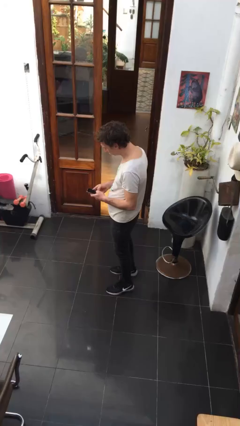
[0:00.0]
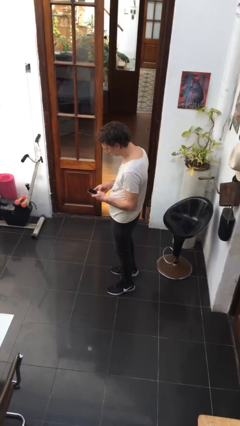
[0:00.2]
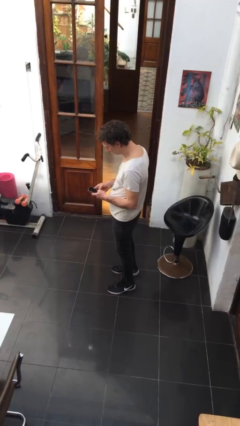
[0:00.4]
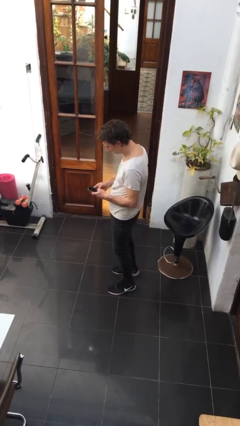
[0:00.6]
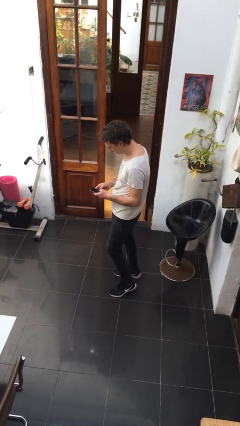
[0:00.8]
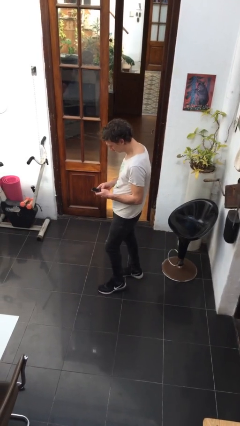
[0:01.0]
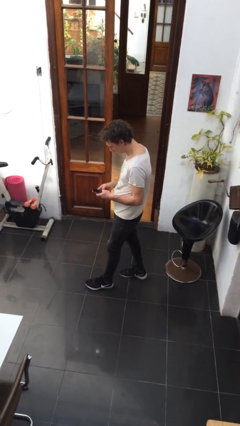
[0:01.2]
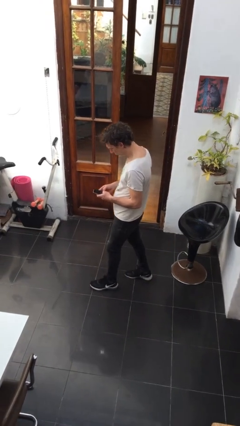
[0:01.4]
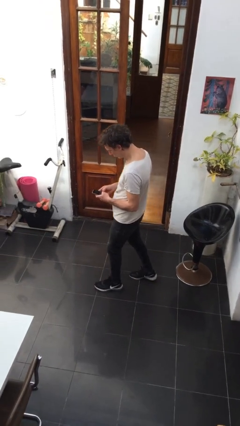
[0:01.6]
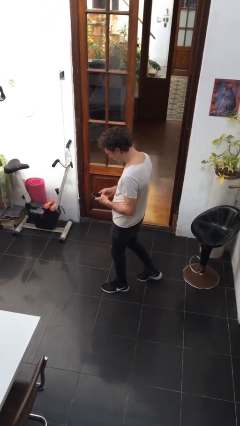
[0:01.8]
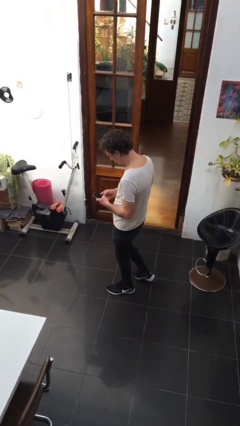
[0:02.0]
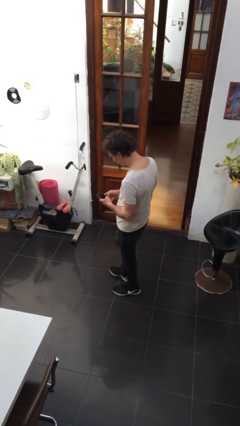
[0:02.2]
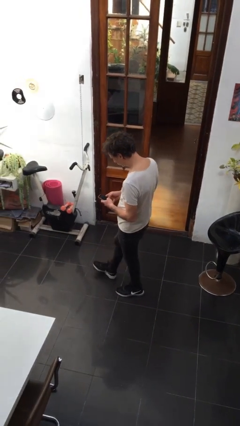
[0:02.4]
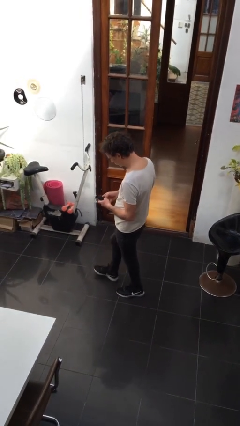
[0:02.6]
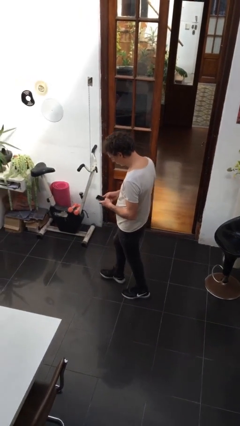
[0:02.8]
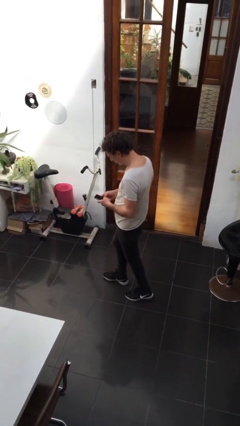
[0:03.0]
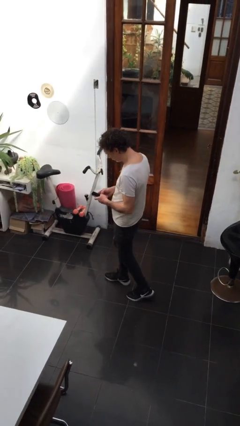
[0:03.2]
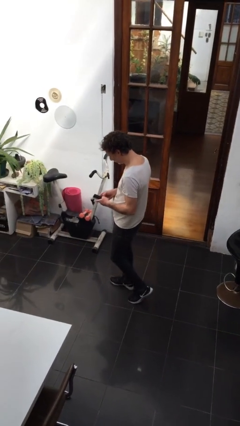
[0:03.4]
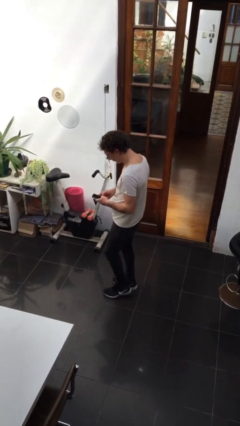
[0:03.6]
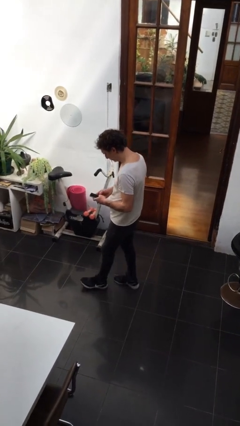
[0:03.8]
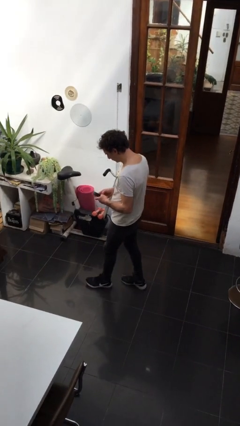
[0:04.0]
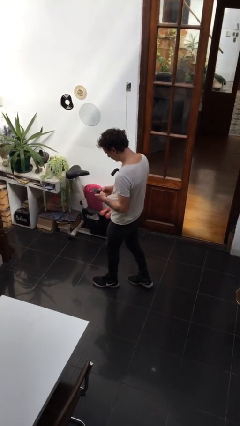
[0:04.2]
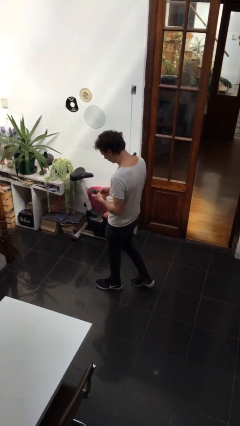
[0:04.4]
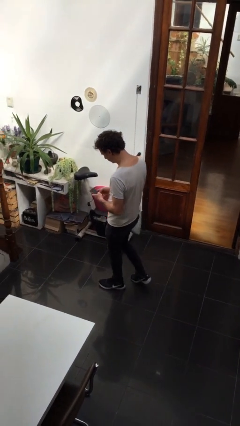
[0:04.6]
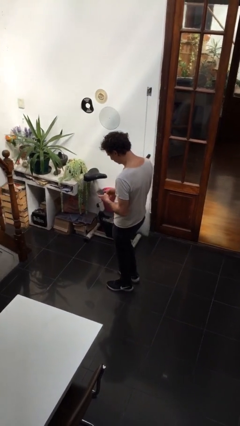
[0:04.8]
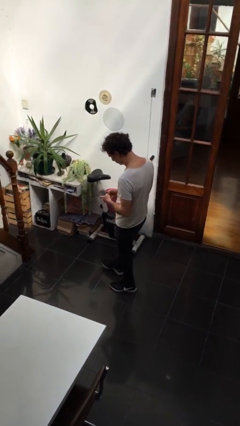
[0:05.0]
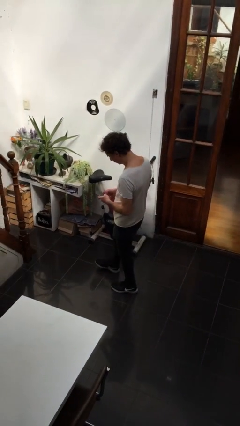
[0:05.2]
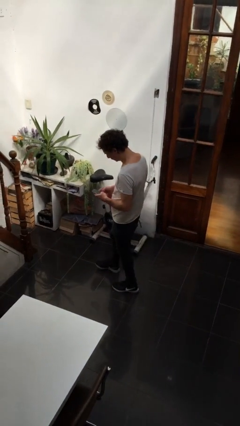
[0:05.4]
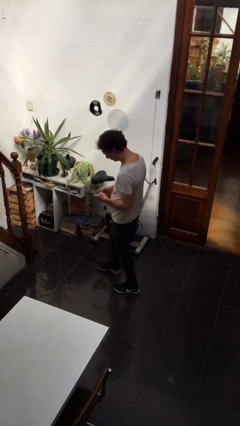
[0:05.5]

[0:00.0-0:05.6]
person texts on phone

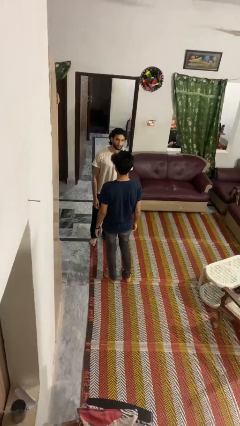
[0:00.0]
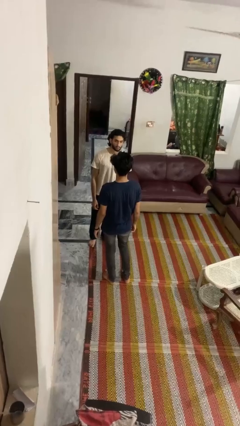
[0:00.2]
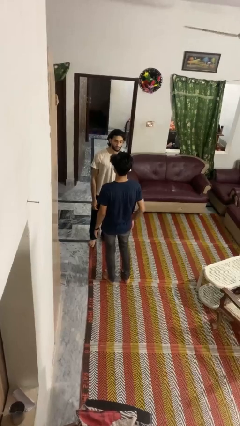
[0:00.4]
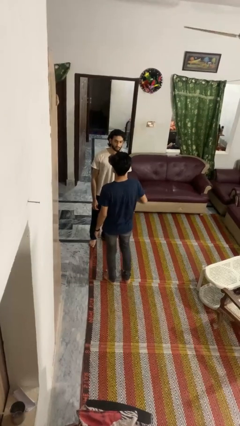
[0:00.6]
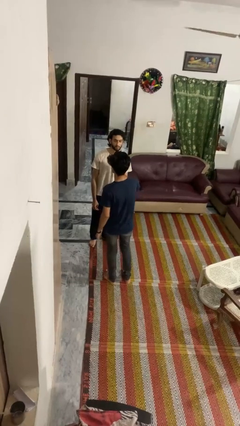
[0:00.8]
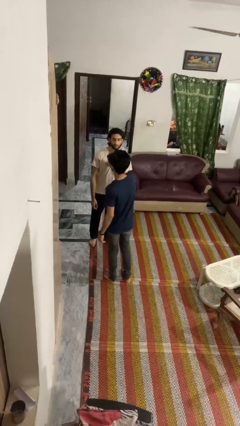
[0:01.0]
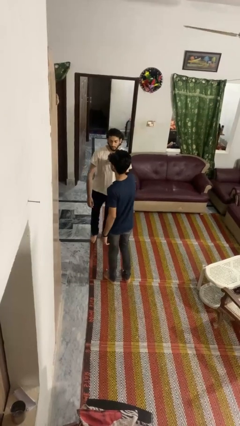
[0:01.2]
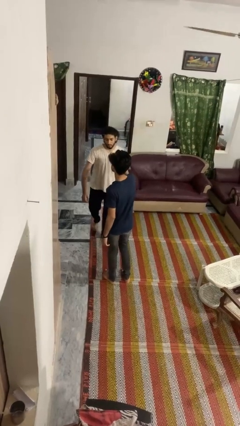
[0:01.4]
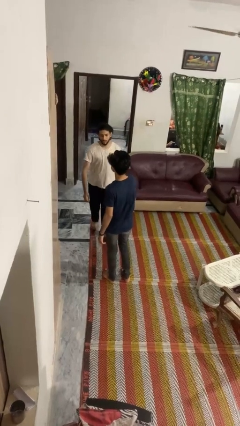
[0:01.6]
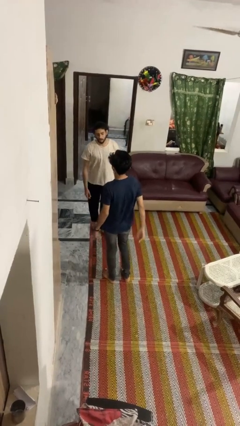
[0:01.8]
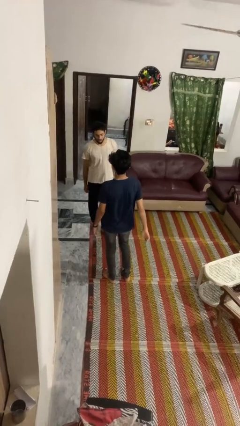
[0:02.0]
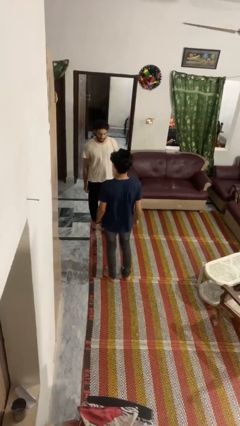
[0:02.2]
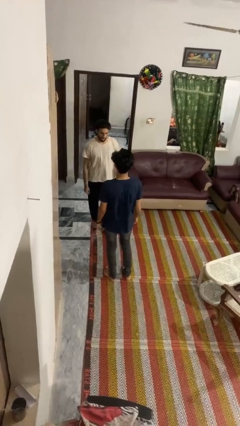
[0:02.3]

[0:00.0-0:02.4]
person shoves person

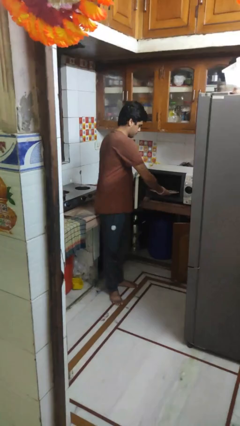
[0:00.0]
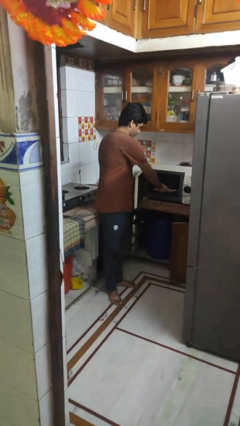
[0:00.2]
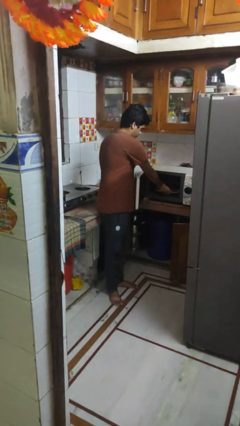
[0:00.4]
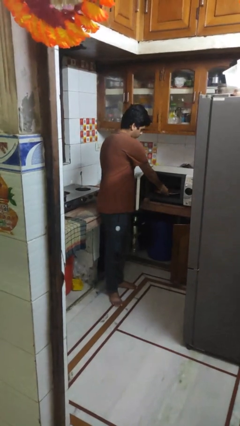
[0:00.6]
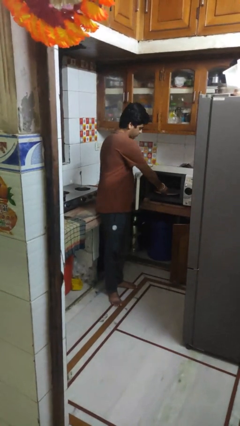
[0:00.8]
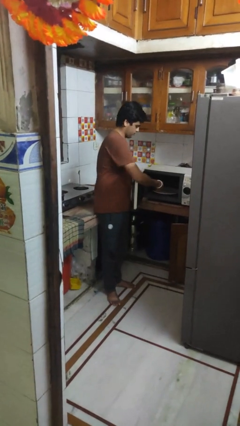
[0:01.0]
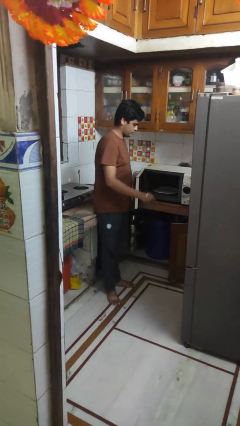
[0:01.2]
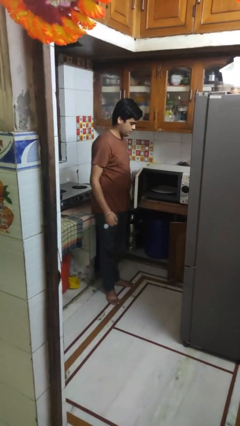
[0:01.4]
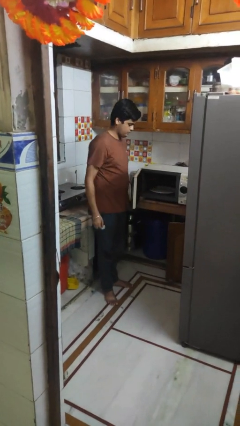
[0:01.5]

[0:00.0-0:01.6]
person puts object into microwave

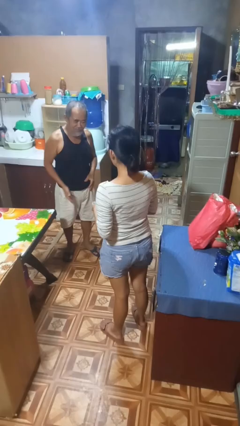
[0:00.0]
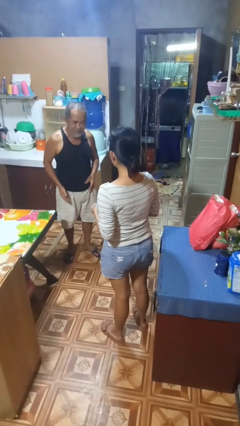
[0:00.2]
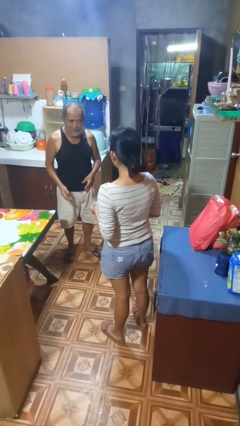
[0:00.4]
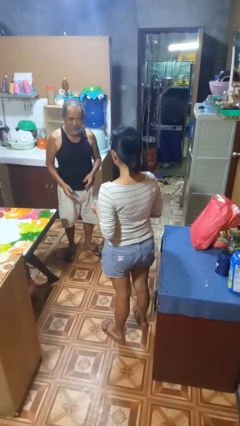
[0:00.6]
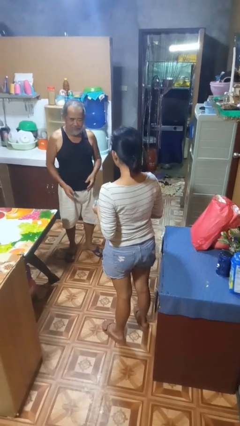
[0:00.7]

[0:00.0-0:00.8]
person catches object from person

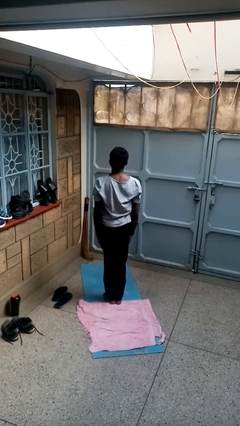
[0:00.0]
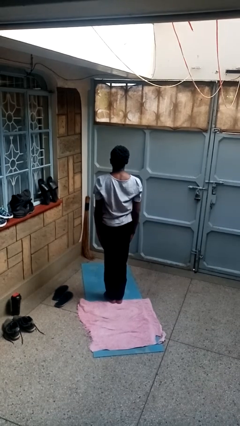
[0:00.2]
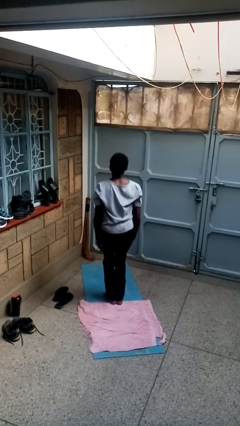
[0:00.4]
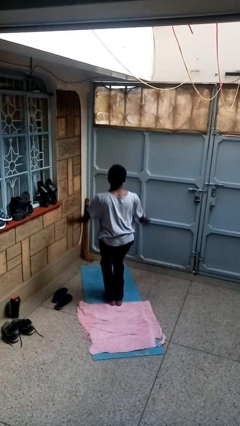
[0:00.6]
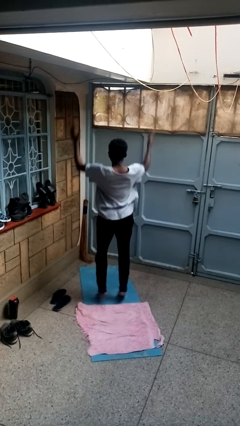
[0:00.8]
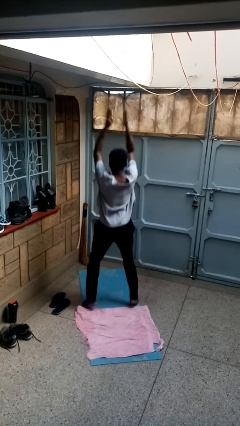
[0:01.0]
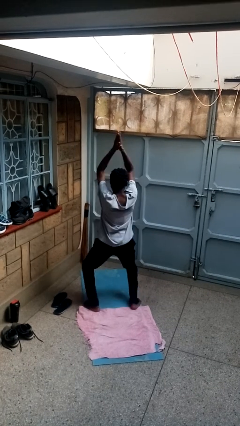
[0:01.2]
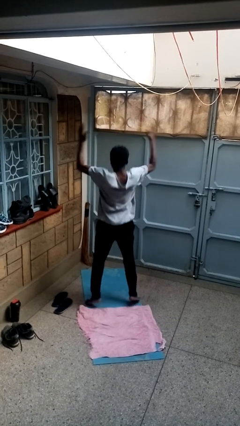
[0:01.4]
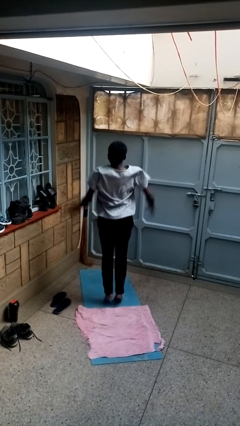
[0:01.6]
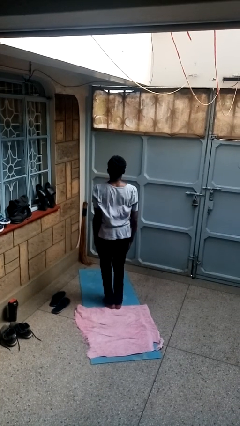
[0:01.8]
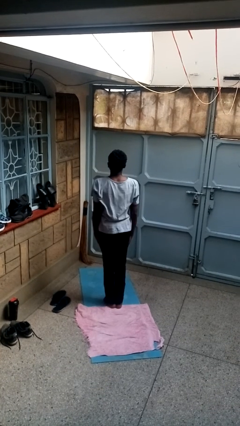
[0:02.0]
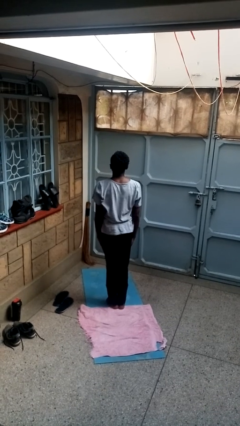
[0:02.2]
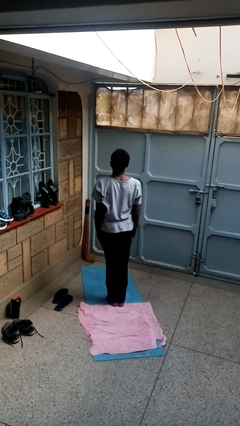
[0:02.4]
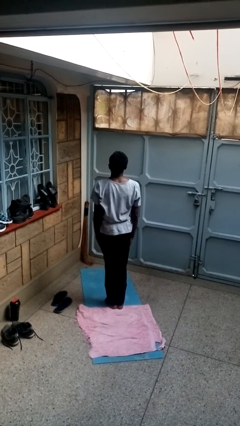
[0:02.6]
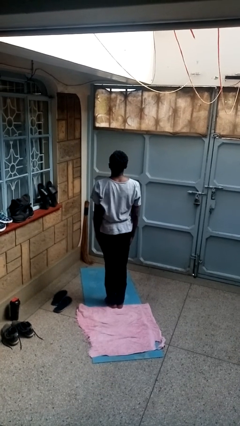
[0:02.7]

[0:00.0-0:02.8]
person exercises with jumping jacks

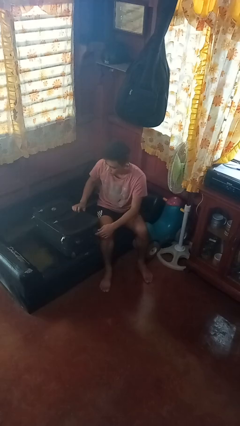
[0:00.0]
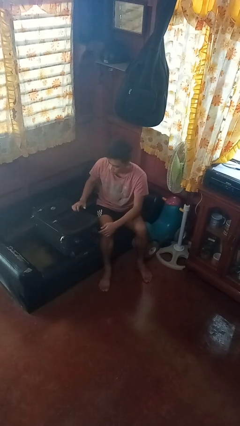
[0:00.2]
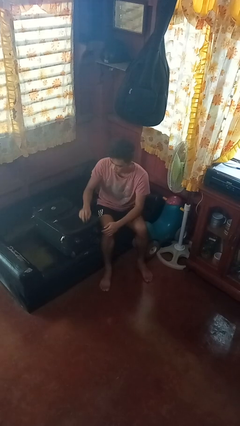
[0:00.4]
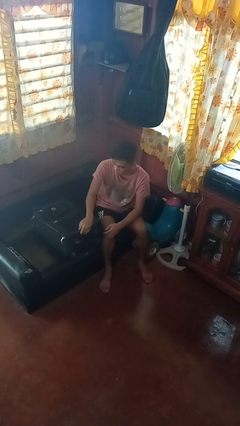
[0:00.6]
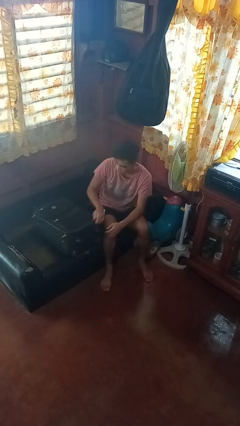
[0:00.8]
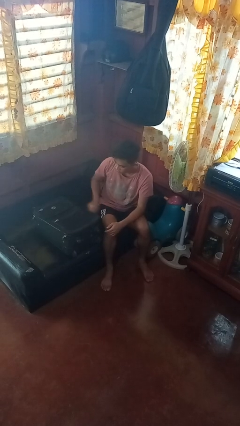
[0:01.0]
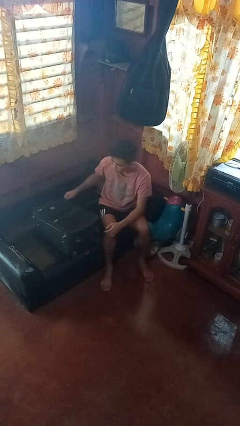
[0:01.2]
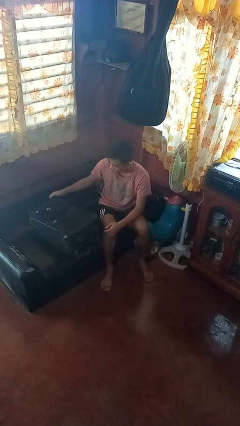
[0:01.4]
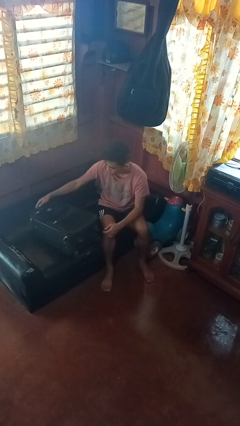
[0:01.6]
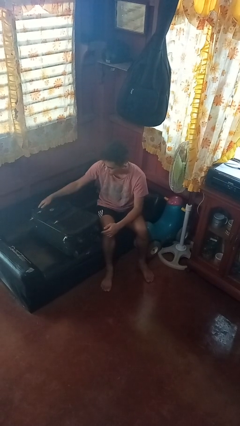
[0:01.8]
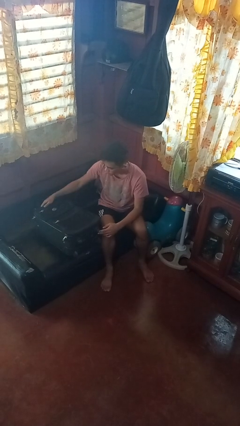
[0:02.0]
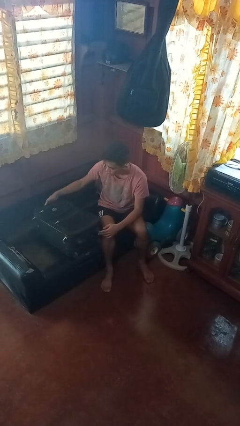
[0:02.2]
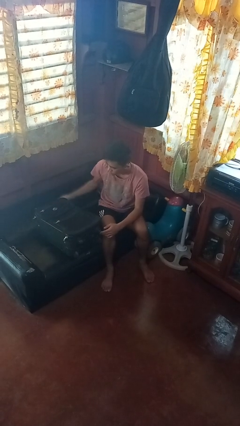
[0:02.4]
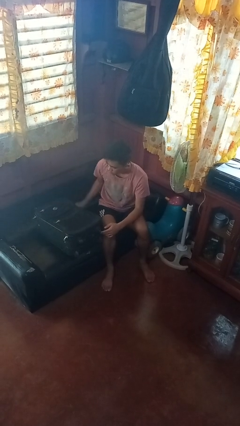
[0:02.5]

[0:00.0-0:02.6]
person closes suitcase

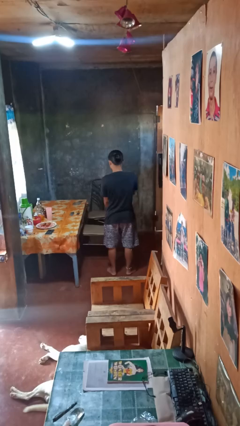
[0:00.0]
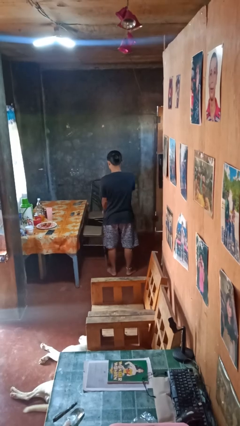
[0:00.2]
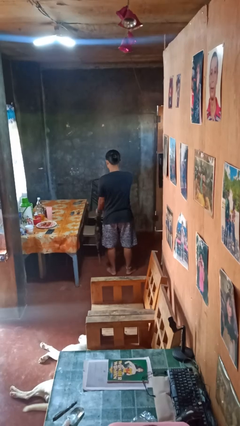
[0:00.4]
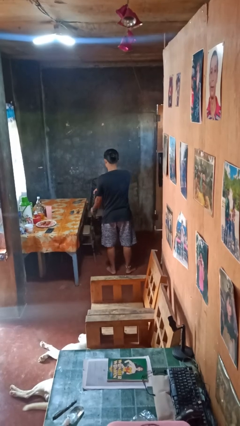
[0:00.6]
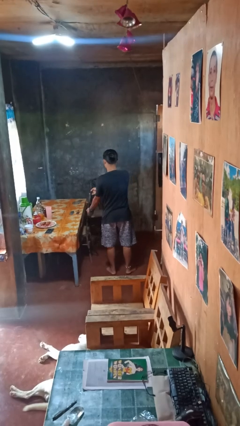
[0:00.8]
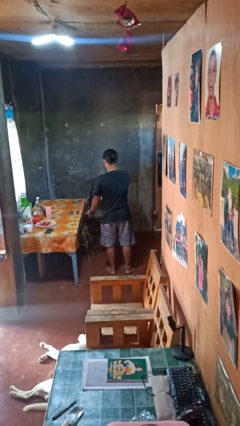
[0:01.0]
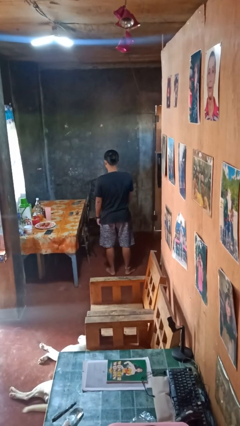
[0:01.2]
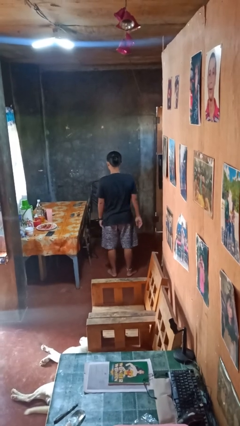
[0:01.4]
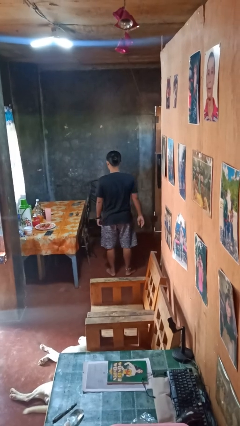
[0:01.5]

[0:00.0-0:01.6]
person pushes in chair
